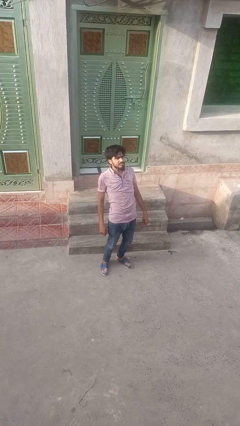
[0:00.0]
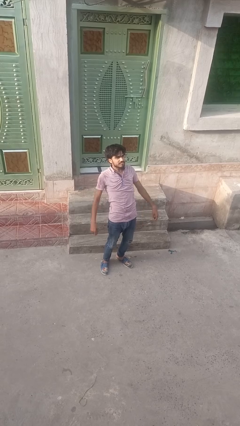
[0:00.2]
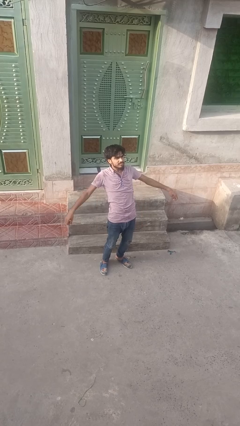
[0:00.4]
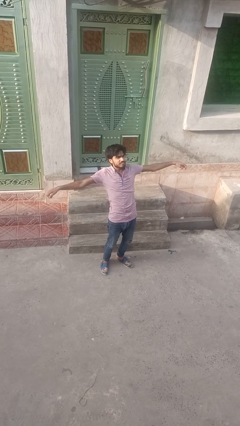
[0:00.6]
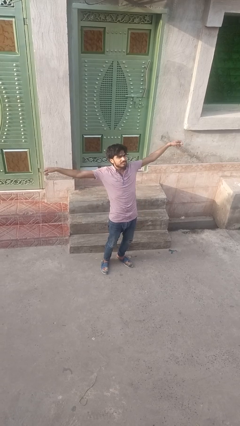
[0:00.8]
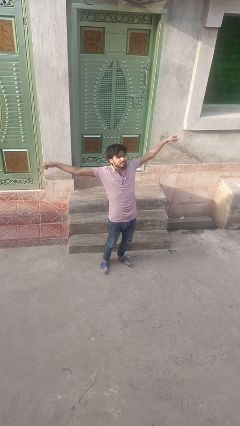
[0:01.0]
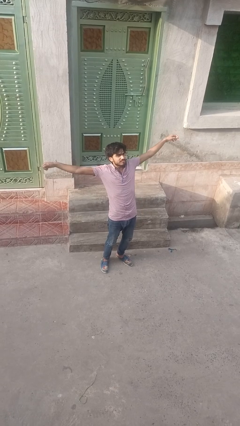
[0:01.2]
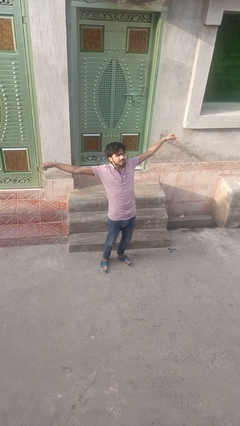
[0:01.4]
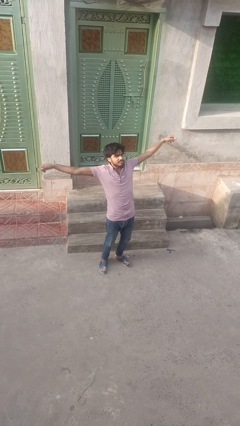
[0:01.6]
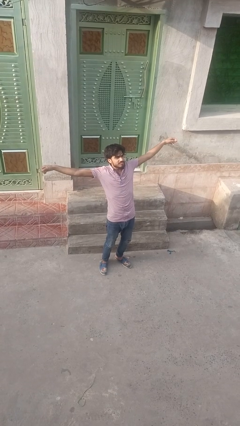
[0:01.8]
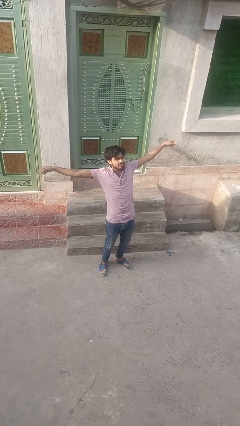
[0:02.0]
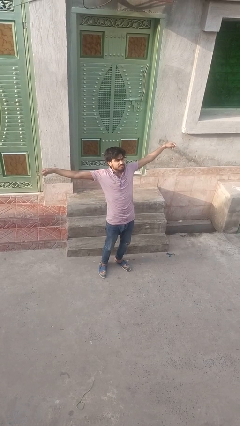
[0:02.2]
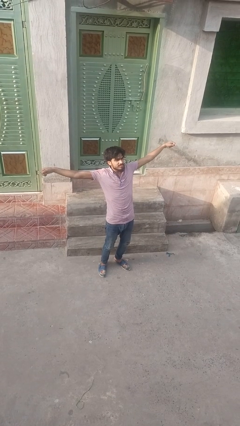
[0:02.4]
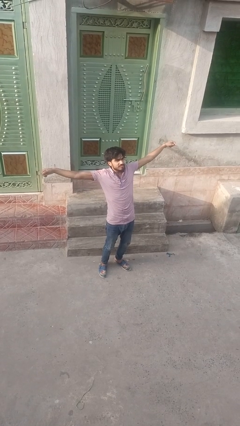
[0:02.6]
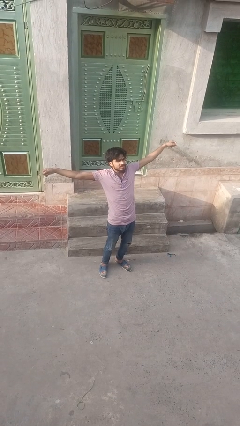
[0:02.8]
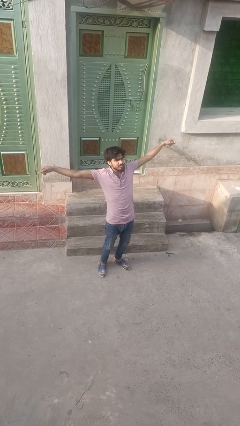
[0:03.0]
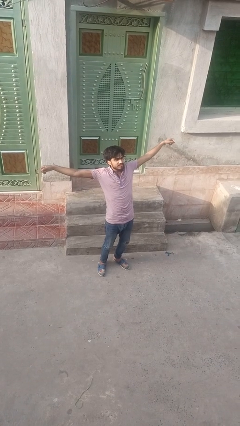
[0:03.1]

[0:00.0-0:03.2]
person stretches arms to side

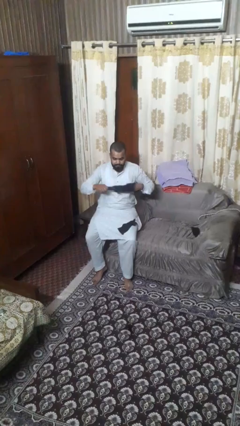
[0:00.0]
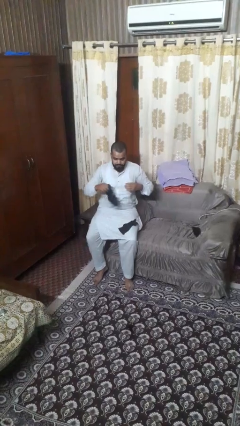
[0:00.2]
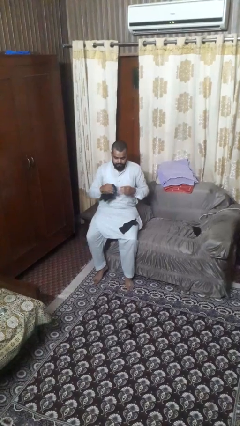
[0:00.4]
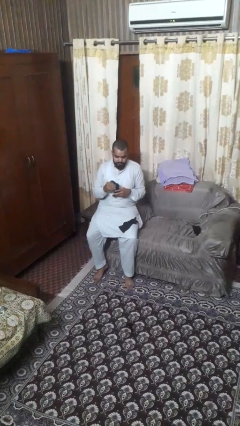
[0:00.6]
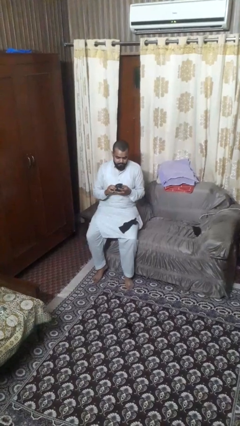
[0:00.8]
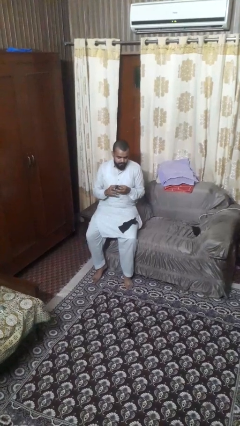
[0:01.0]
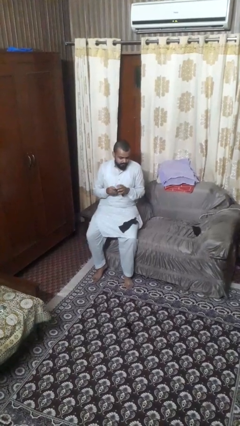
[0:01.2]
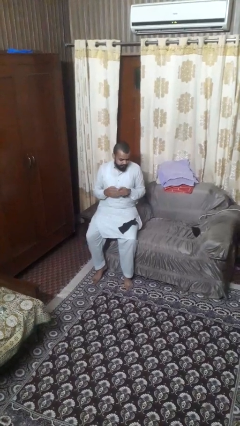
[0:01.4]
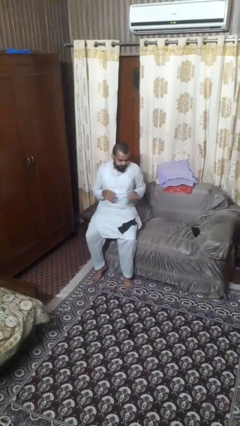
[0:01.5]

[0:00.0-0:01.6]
person takes off gloves

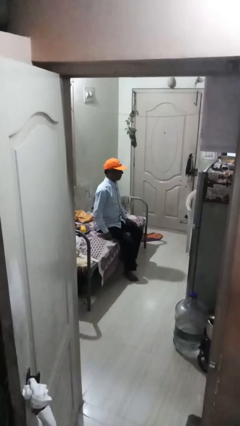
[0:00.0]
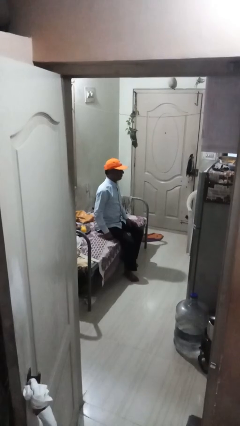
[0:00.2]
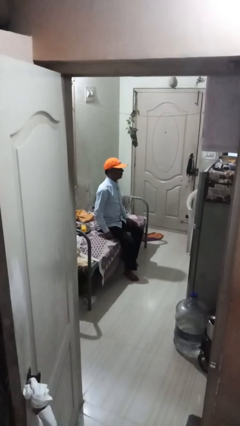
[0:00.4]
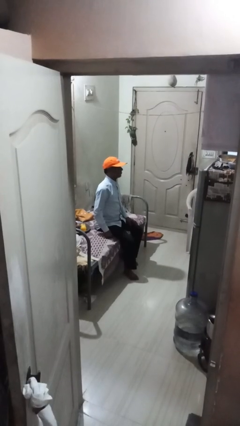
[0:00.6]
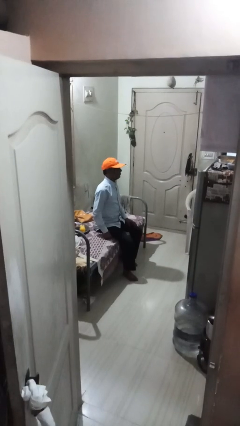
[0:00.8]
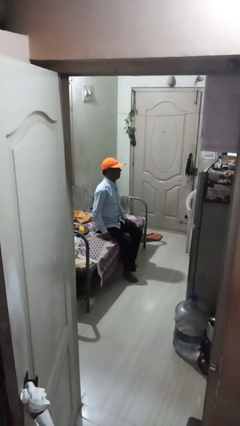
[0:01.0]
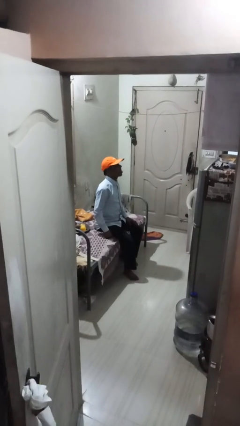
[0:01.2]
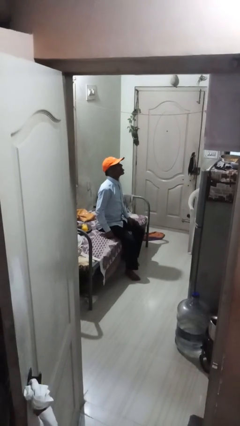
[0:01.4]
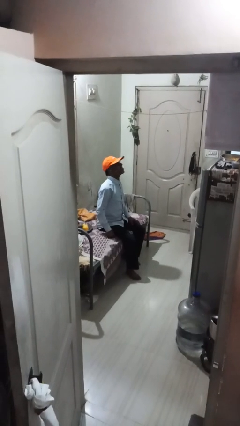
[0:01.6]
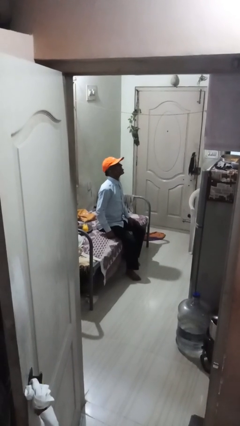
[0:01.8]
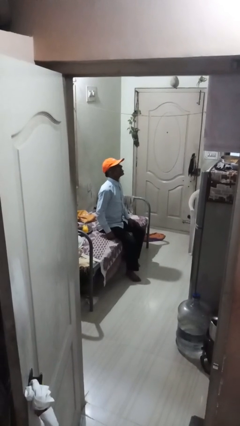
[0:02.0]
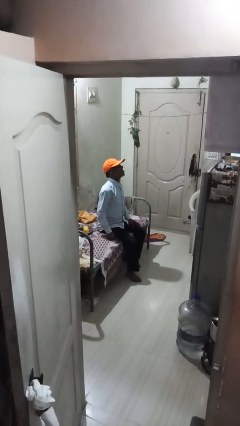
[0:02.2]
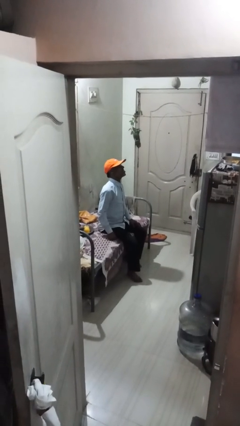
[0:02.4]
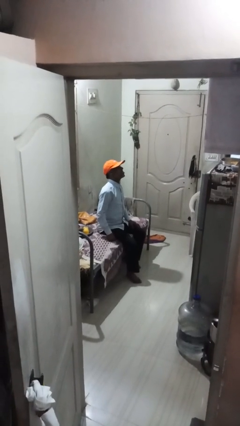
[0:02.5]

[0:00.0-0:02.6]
person sticks out tongue

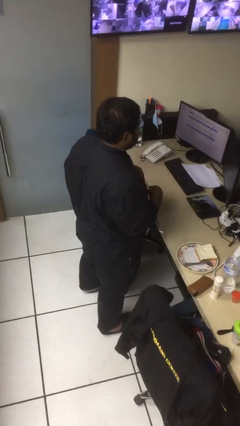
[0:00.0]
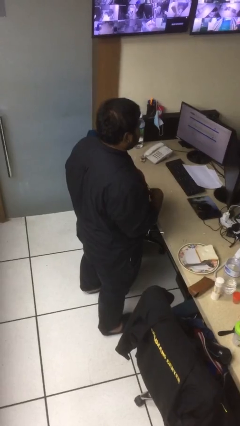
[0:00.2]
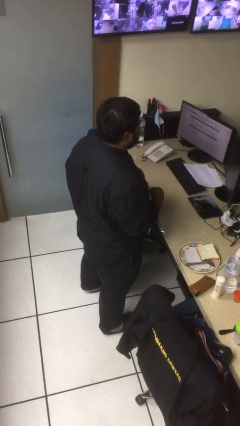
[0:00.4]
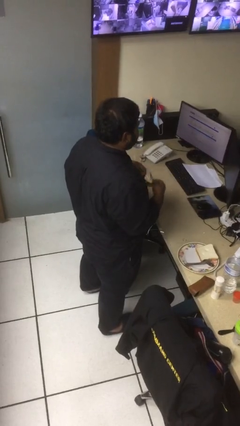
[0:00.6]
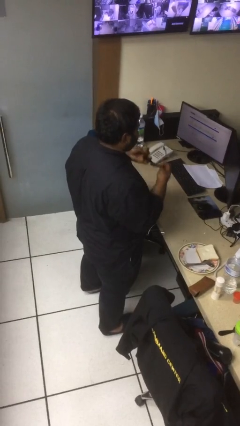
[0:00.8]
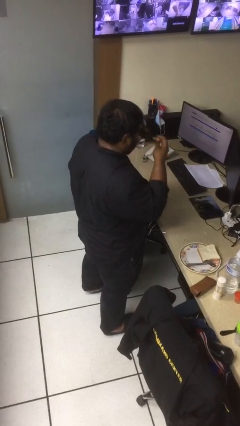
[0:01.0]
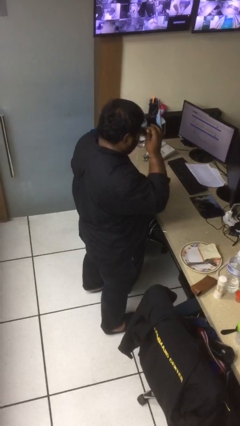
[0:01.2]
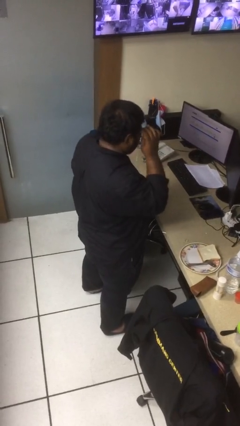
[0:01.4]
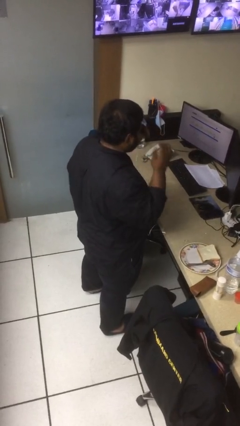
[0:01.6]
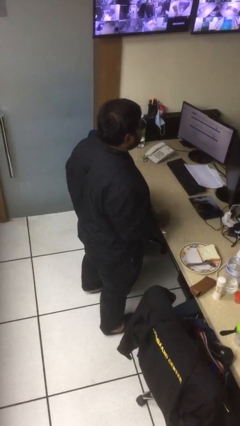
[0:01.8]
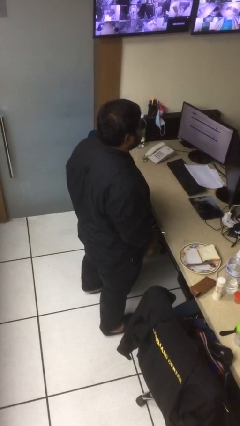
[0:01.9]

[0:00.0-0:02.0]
person puts on sunglasses

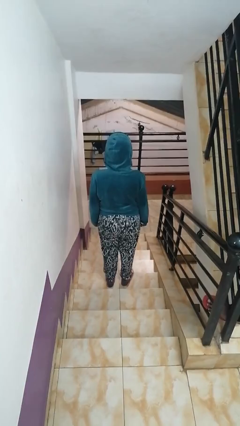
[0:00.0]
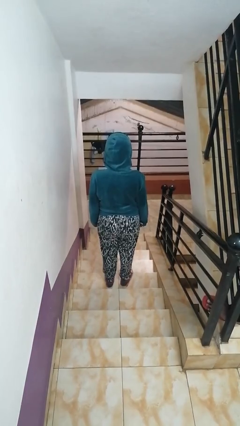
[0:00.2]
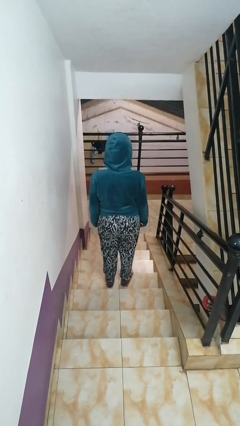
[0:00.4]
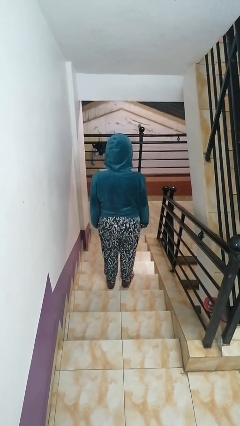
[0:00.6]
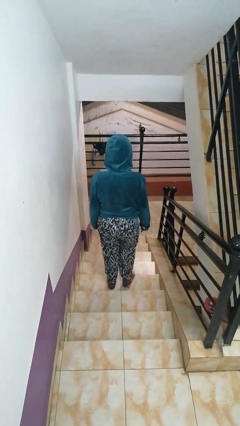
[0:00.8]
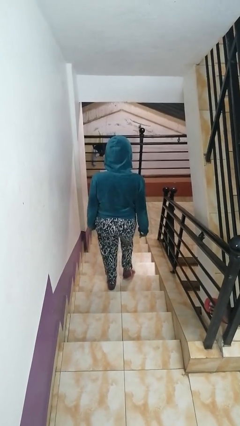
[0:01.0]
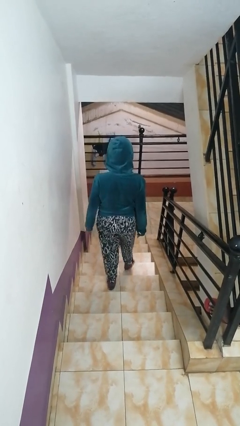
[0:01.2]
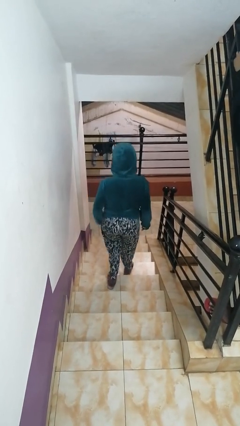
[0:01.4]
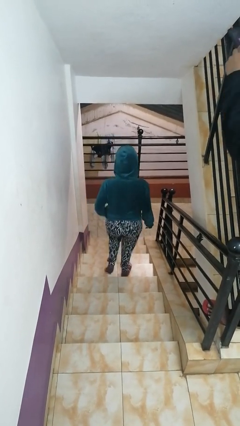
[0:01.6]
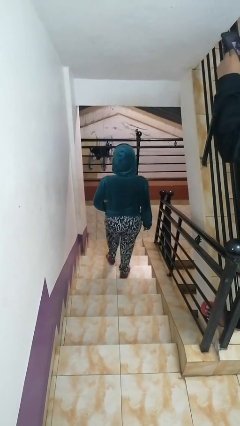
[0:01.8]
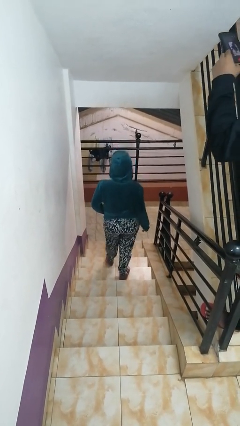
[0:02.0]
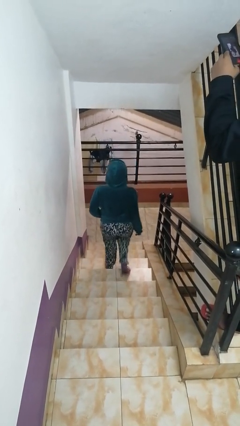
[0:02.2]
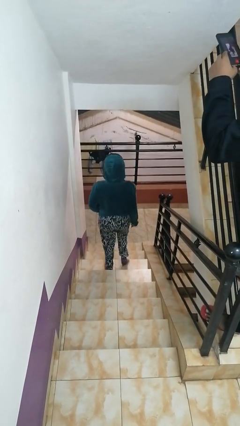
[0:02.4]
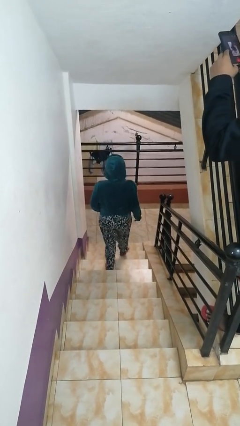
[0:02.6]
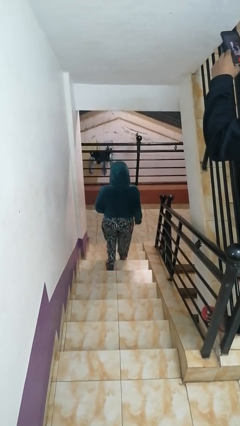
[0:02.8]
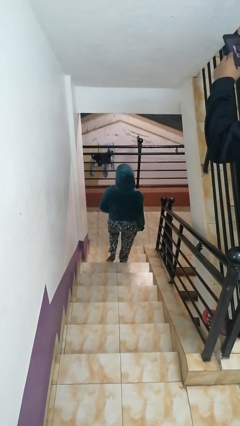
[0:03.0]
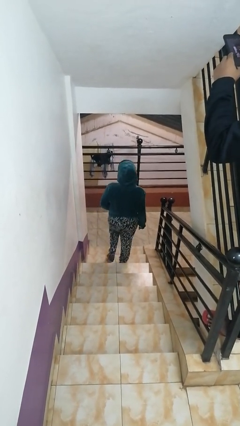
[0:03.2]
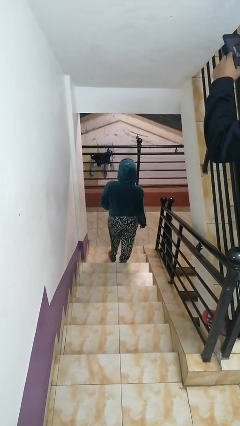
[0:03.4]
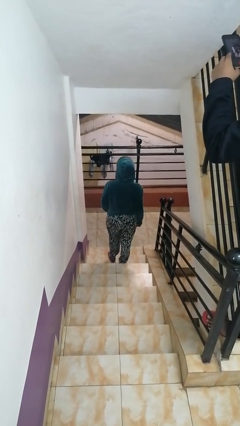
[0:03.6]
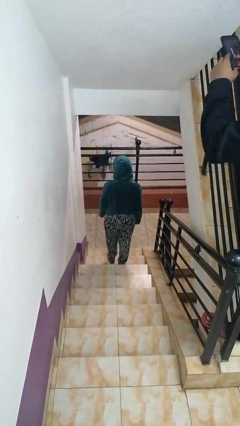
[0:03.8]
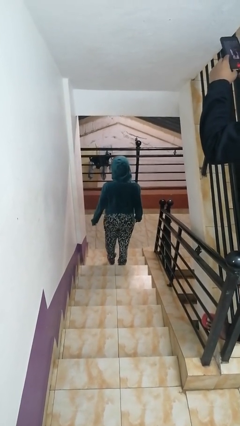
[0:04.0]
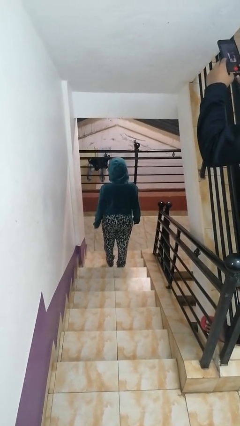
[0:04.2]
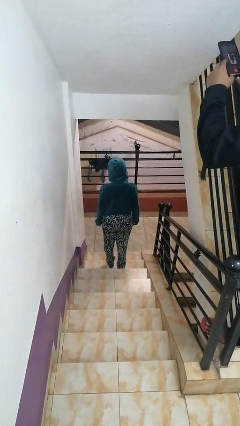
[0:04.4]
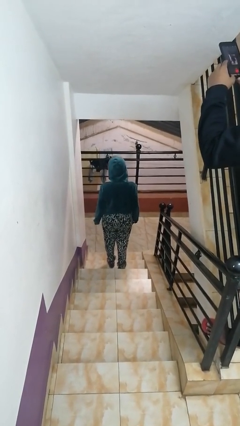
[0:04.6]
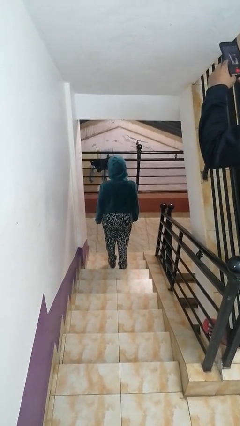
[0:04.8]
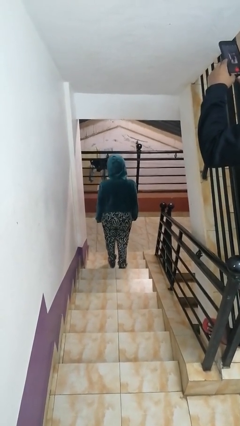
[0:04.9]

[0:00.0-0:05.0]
person climbs down stairs

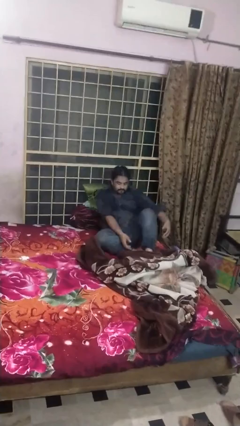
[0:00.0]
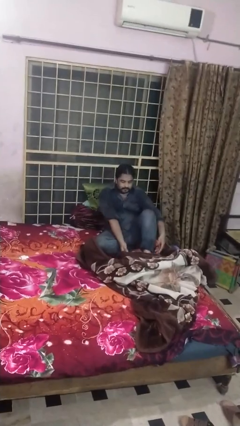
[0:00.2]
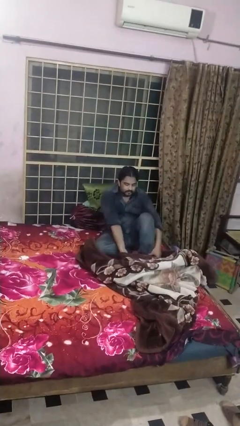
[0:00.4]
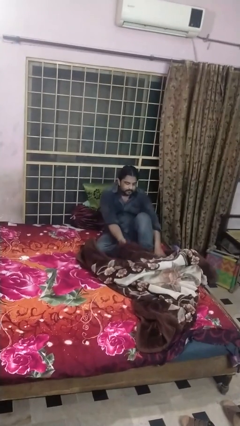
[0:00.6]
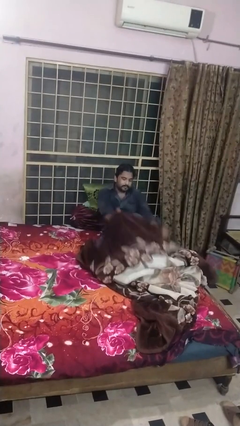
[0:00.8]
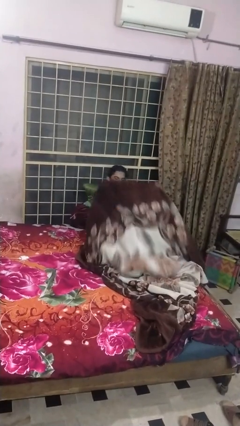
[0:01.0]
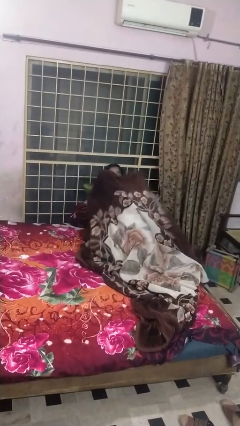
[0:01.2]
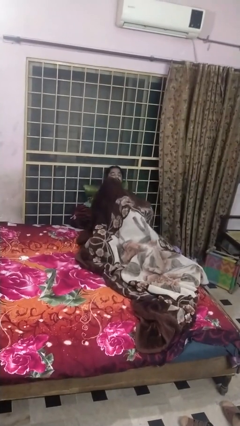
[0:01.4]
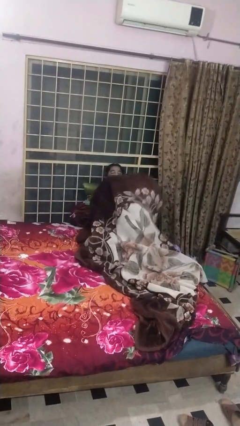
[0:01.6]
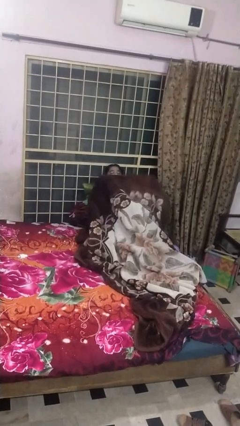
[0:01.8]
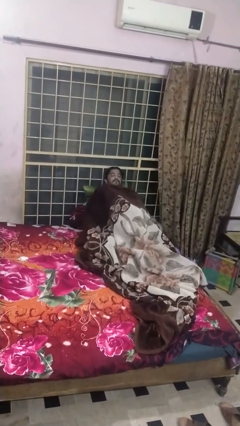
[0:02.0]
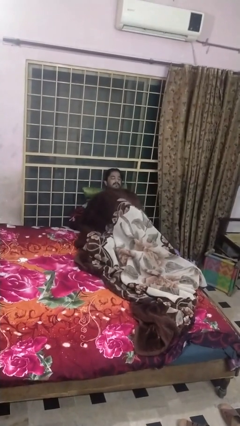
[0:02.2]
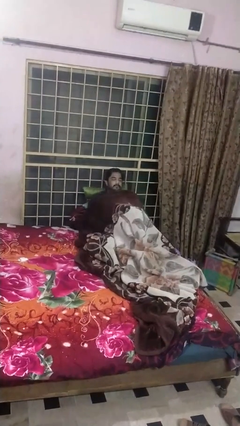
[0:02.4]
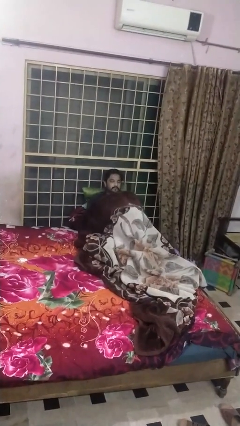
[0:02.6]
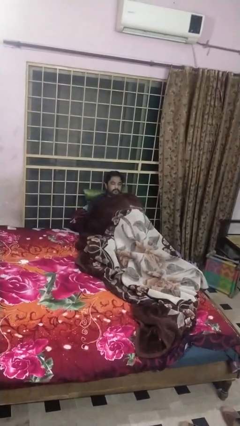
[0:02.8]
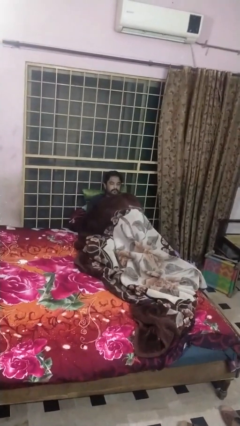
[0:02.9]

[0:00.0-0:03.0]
person covers with blanket

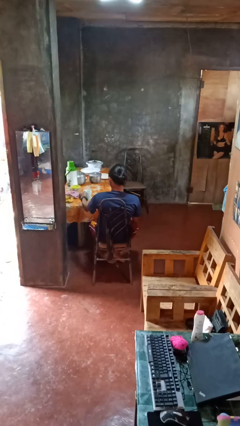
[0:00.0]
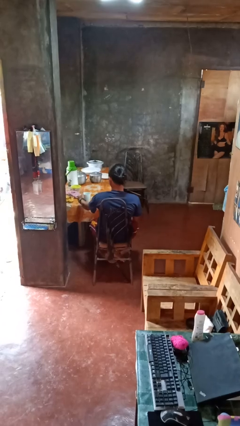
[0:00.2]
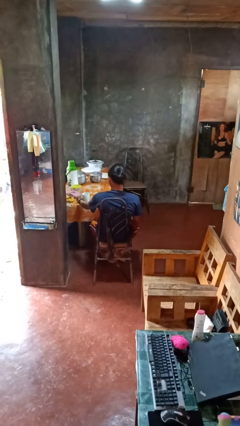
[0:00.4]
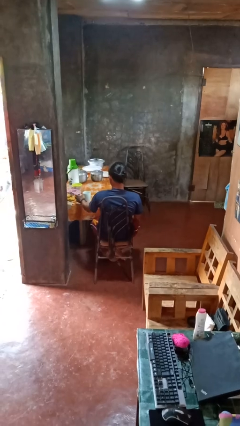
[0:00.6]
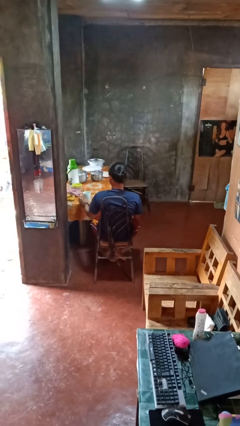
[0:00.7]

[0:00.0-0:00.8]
person puts down object on table
